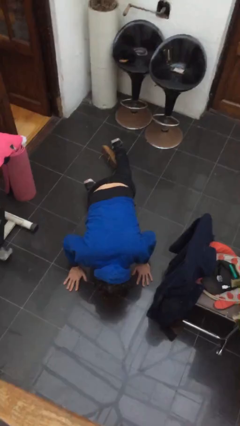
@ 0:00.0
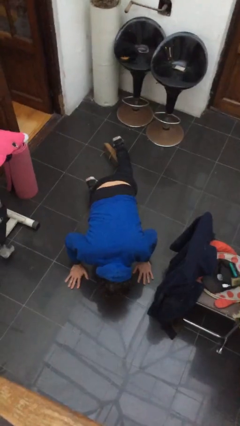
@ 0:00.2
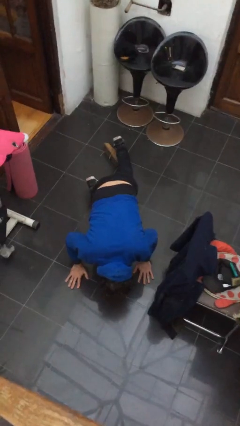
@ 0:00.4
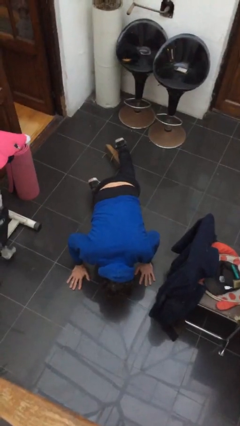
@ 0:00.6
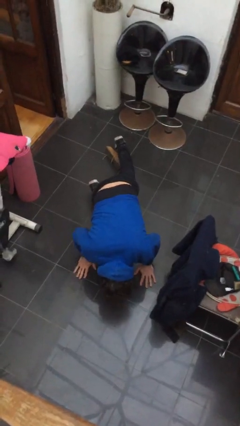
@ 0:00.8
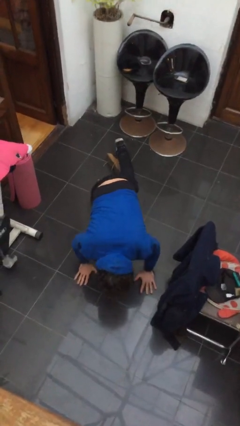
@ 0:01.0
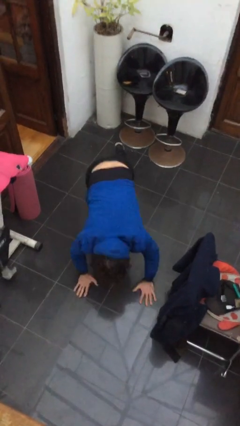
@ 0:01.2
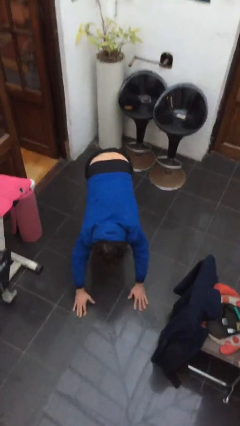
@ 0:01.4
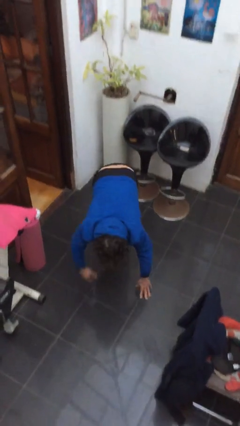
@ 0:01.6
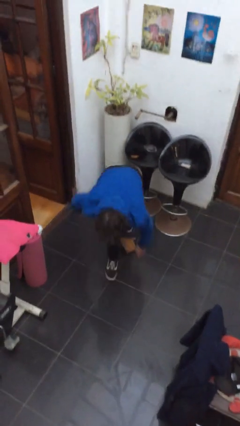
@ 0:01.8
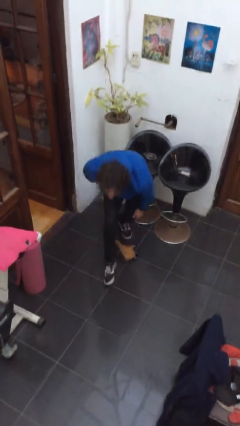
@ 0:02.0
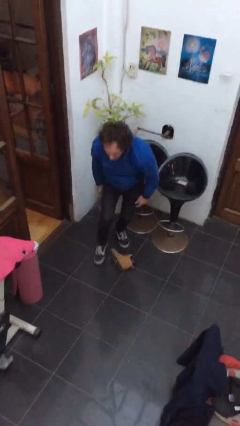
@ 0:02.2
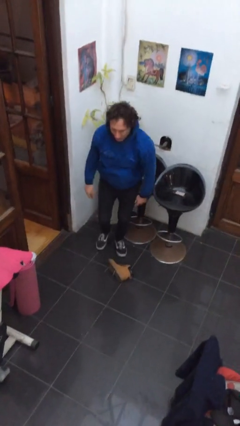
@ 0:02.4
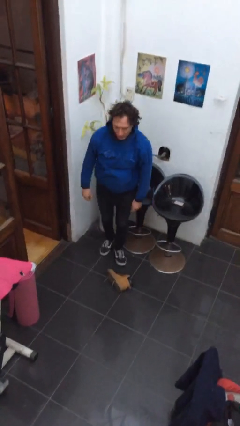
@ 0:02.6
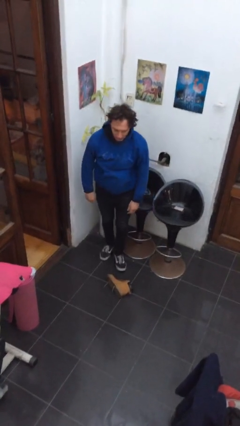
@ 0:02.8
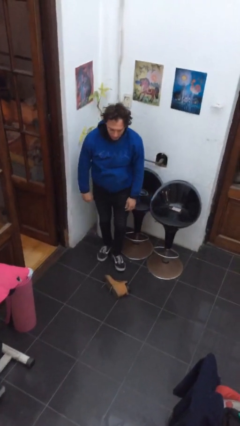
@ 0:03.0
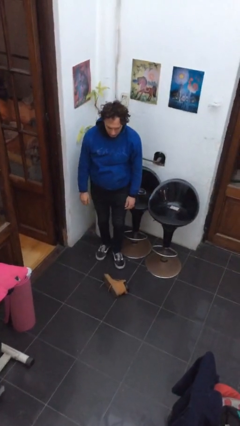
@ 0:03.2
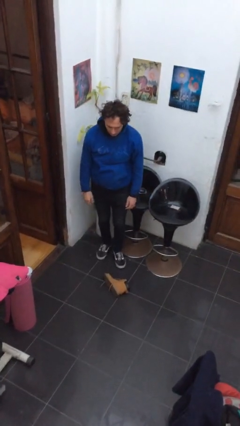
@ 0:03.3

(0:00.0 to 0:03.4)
person stands up from floor

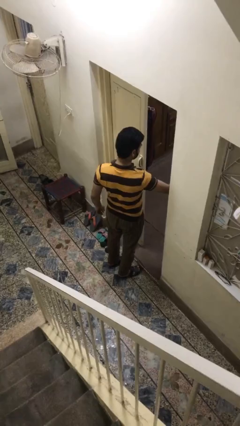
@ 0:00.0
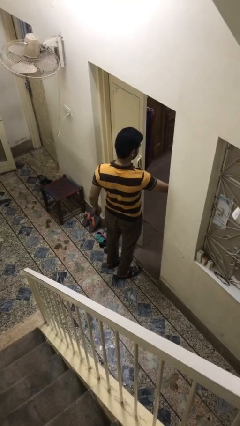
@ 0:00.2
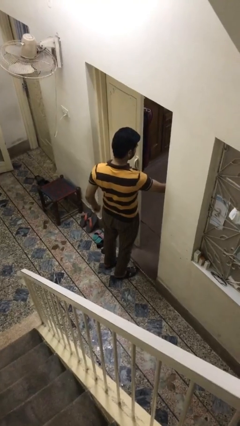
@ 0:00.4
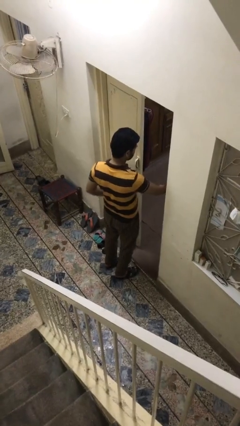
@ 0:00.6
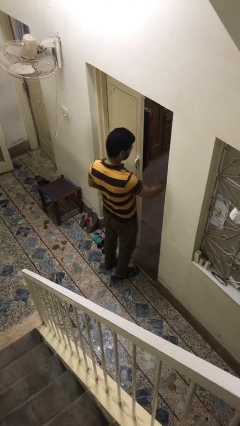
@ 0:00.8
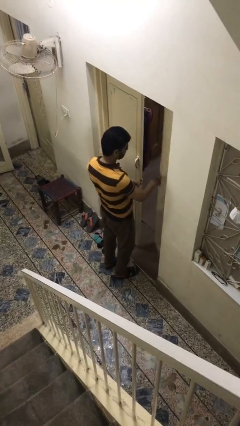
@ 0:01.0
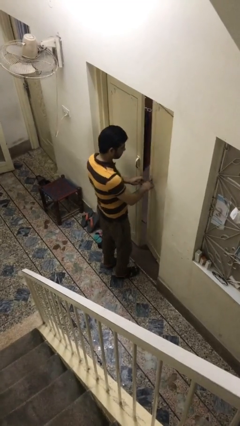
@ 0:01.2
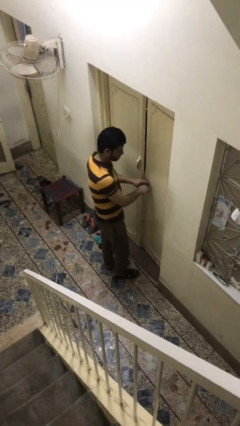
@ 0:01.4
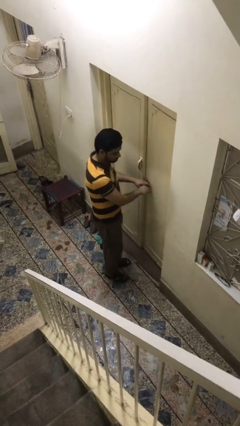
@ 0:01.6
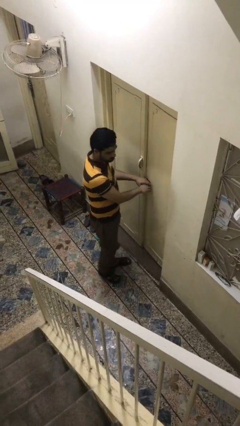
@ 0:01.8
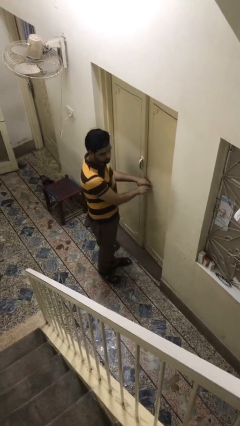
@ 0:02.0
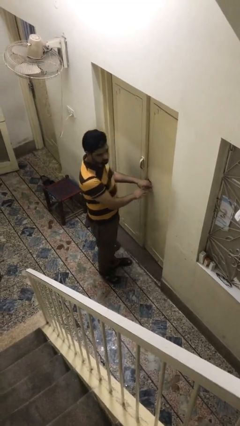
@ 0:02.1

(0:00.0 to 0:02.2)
person closes facility door

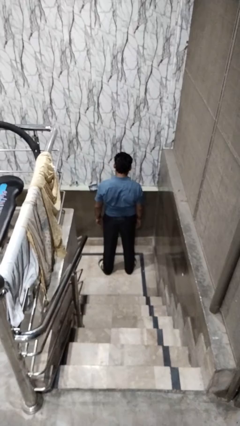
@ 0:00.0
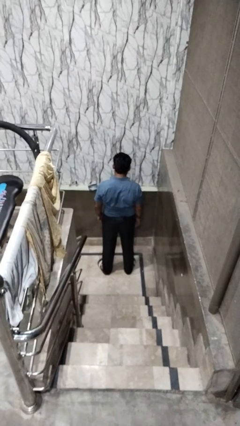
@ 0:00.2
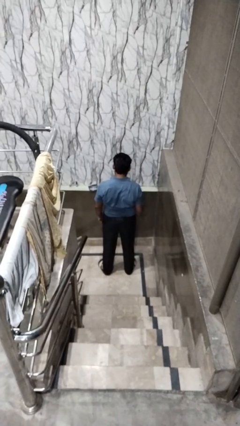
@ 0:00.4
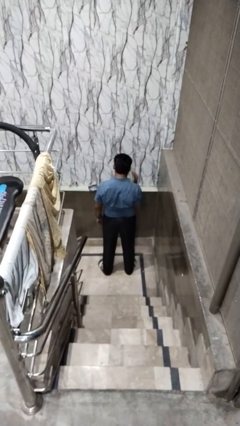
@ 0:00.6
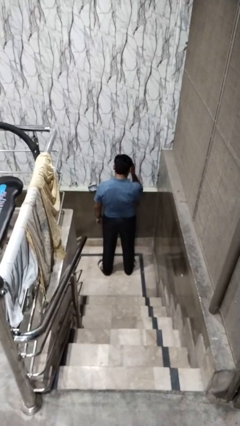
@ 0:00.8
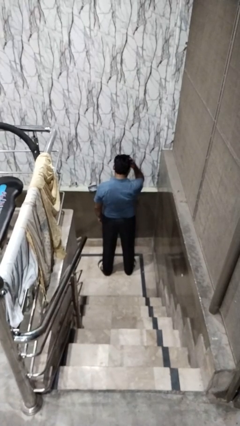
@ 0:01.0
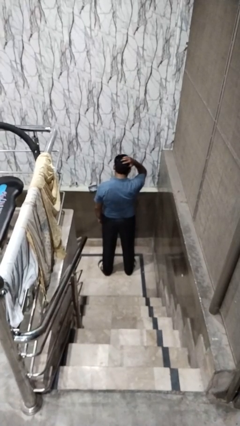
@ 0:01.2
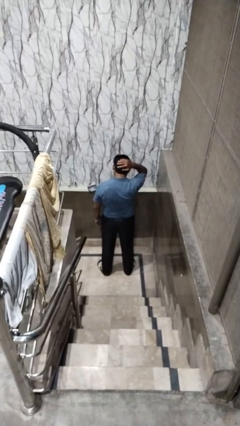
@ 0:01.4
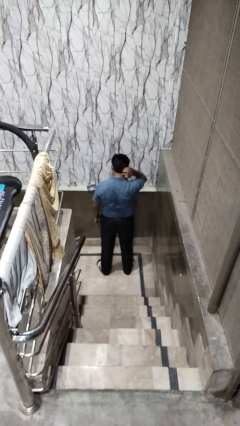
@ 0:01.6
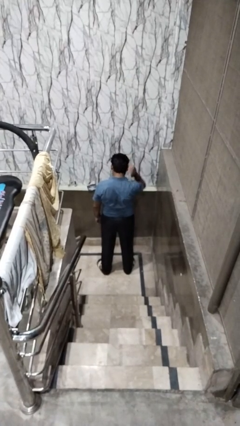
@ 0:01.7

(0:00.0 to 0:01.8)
person strokes hair

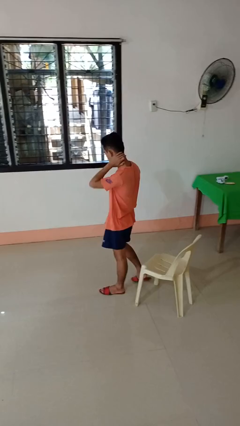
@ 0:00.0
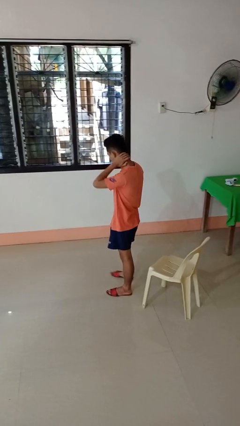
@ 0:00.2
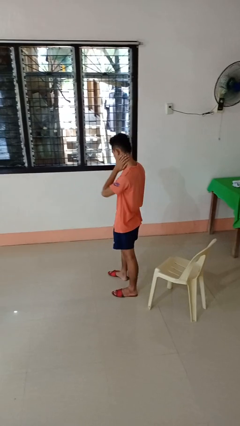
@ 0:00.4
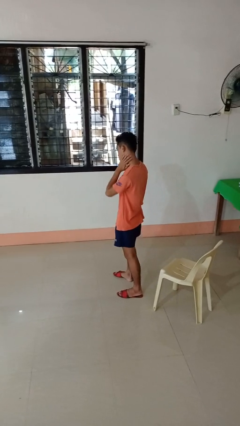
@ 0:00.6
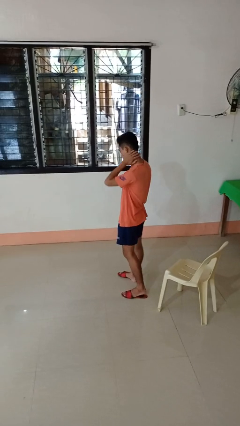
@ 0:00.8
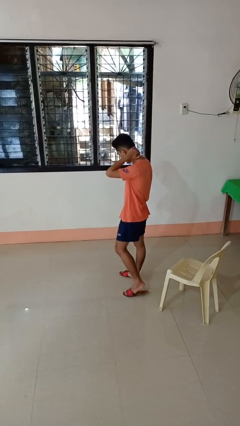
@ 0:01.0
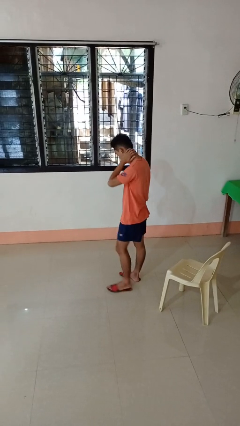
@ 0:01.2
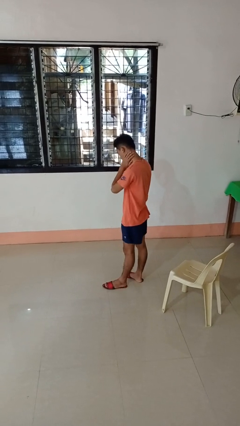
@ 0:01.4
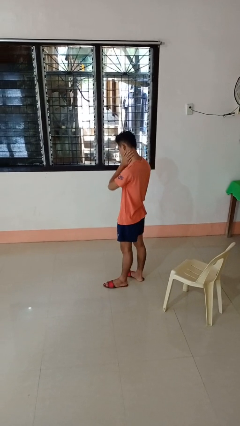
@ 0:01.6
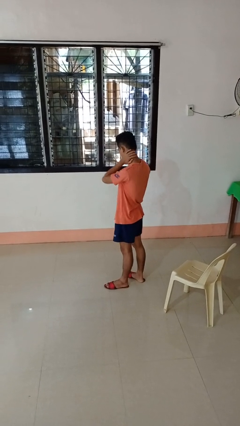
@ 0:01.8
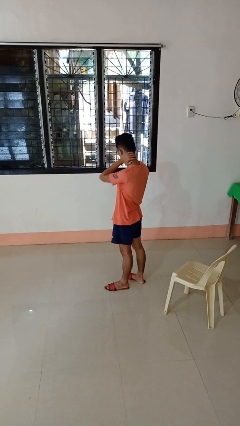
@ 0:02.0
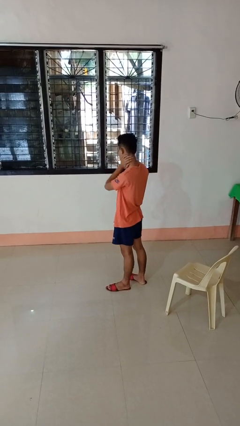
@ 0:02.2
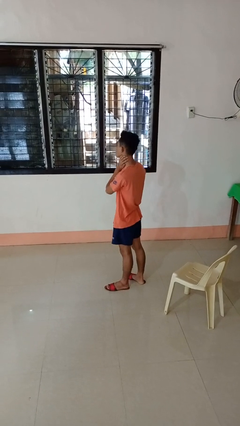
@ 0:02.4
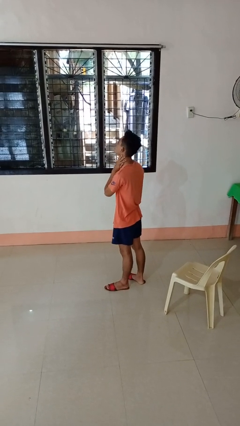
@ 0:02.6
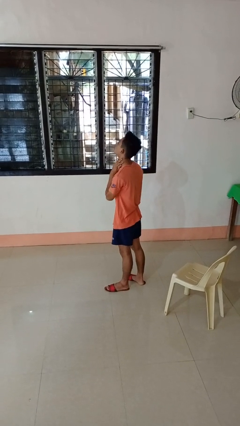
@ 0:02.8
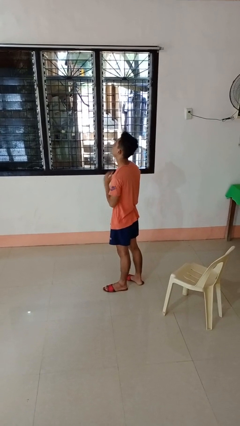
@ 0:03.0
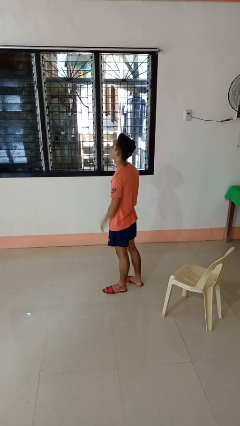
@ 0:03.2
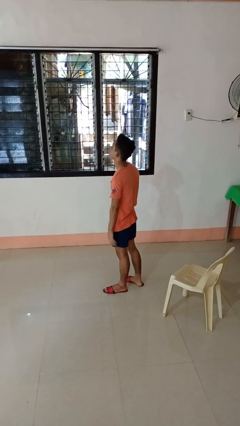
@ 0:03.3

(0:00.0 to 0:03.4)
person rubs neck

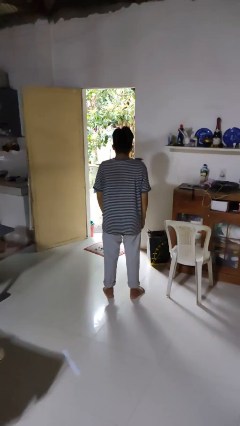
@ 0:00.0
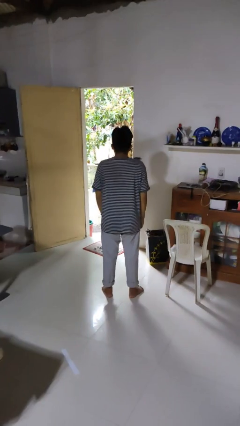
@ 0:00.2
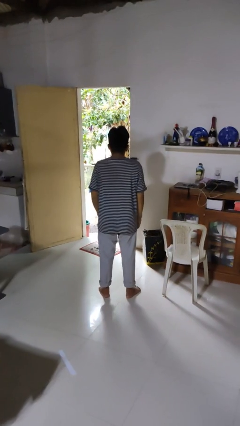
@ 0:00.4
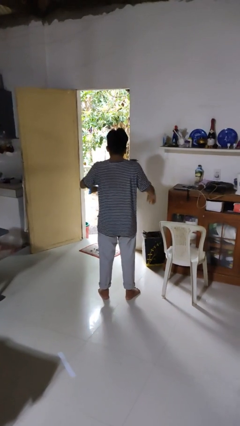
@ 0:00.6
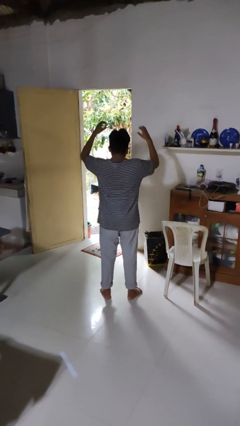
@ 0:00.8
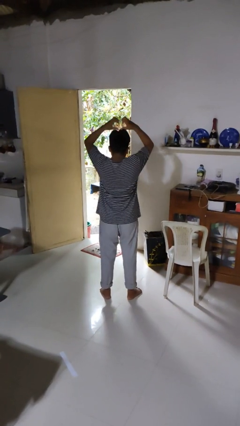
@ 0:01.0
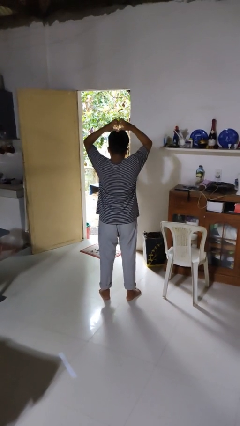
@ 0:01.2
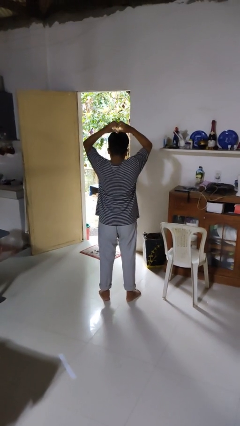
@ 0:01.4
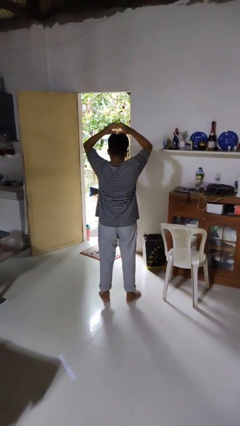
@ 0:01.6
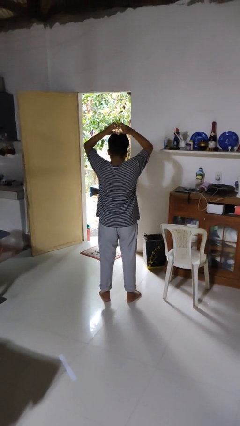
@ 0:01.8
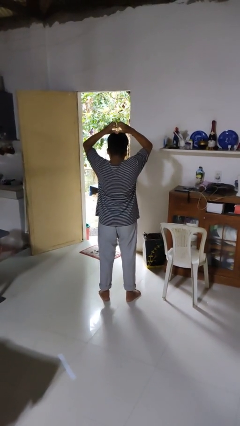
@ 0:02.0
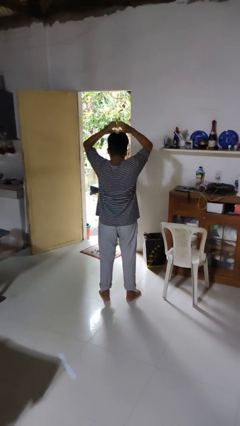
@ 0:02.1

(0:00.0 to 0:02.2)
person gestures heart

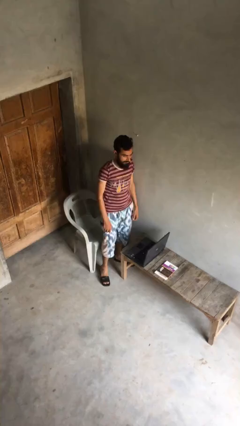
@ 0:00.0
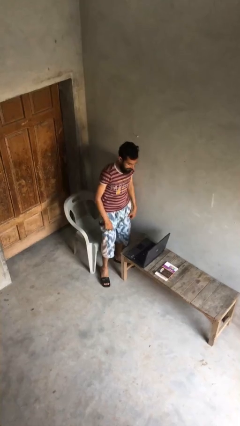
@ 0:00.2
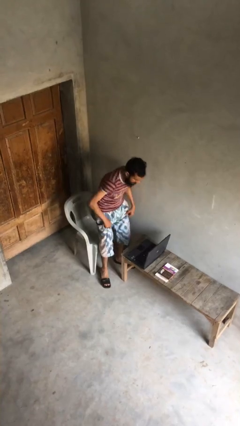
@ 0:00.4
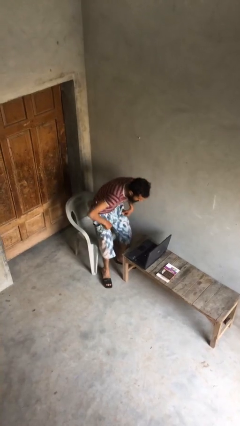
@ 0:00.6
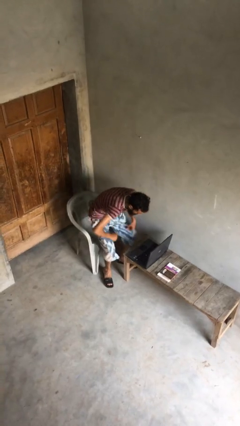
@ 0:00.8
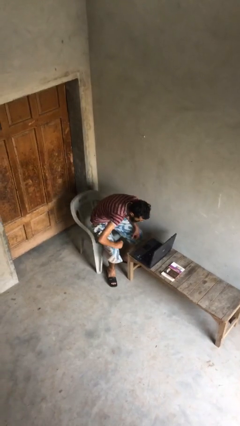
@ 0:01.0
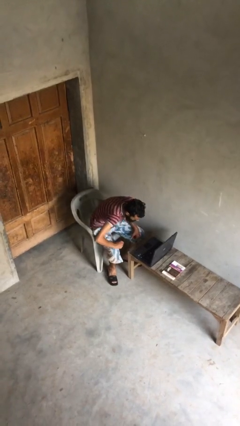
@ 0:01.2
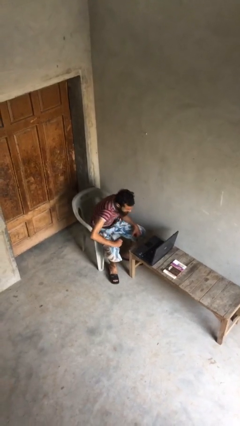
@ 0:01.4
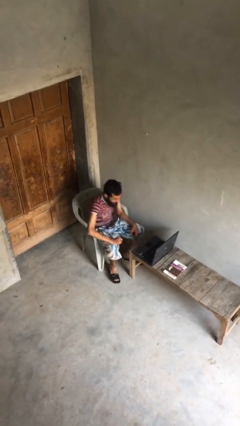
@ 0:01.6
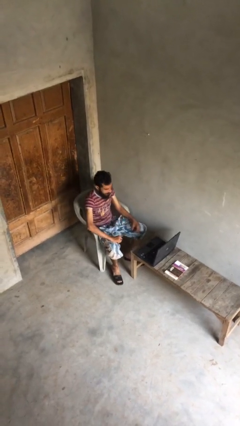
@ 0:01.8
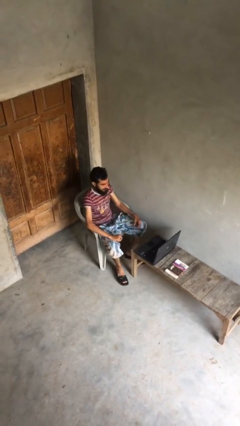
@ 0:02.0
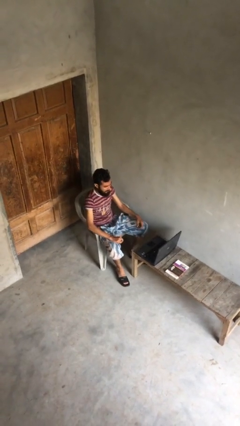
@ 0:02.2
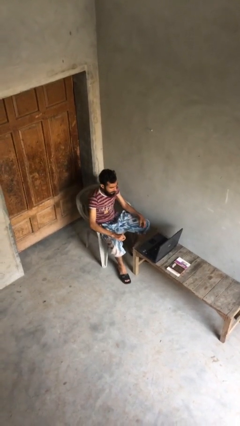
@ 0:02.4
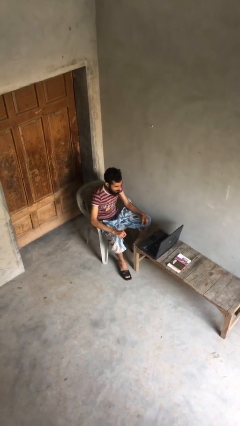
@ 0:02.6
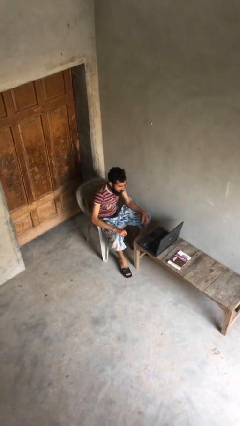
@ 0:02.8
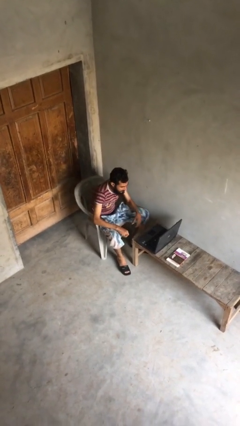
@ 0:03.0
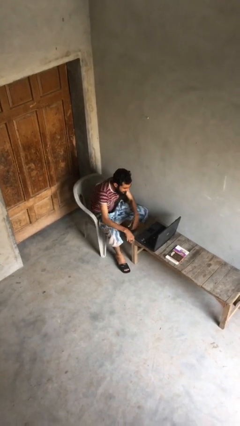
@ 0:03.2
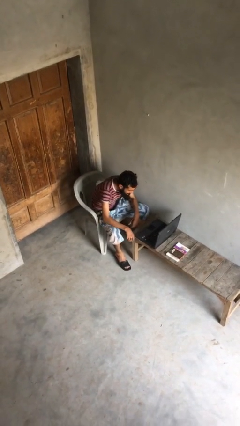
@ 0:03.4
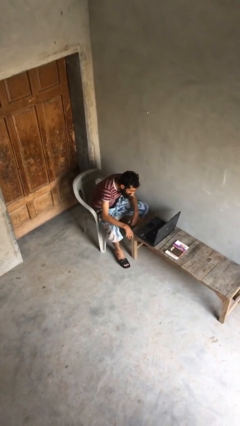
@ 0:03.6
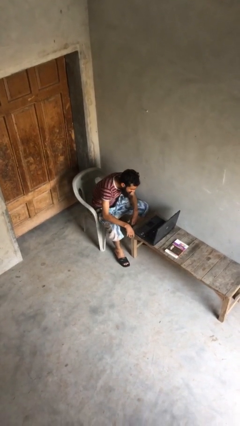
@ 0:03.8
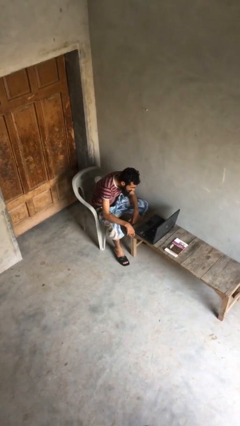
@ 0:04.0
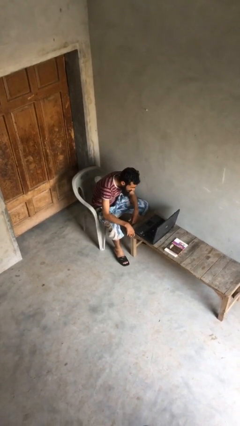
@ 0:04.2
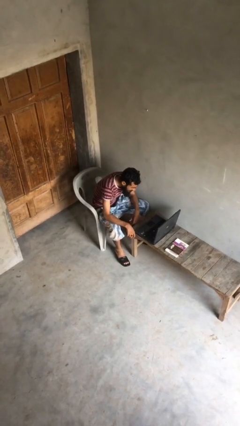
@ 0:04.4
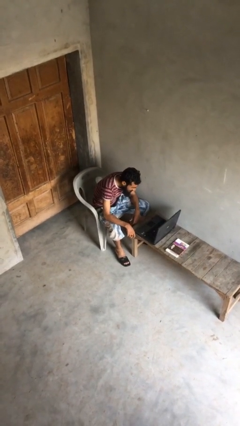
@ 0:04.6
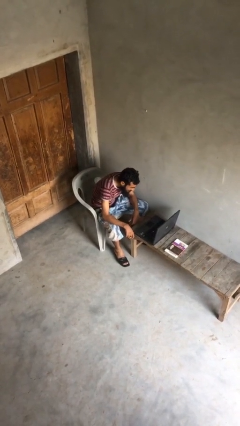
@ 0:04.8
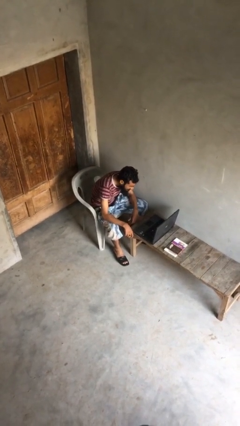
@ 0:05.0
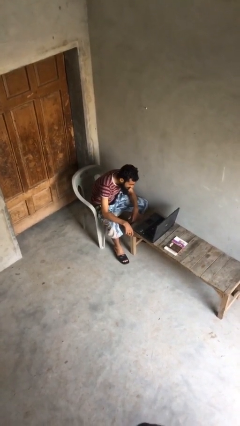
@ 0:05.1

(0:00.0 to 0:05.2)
person sits down
